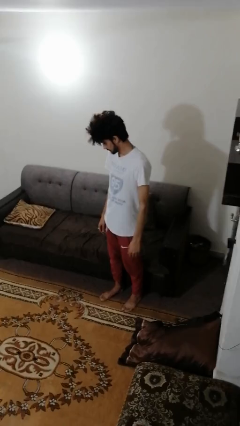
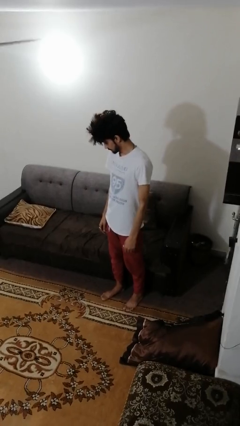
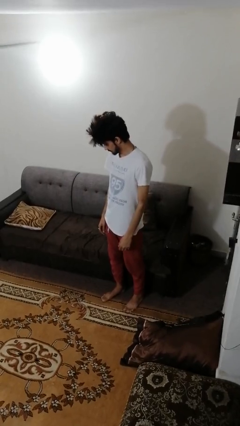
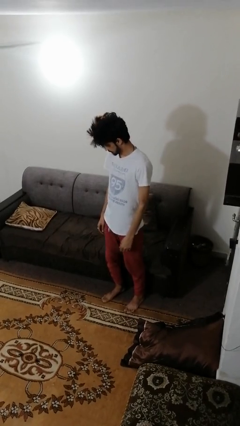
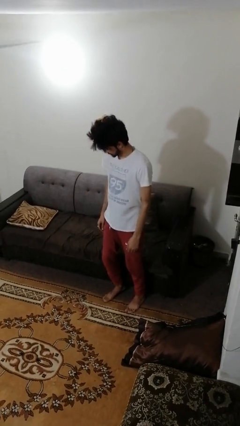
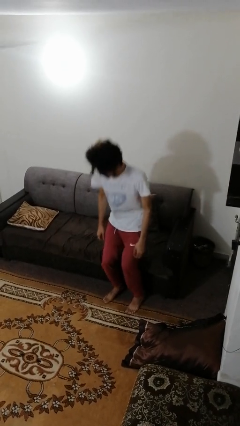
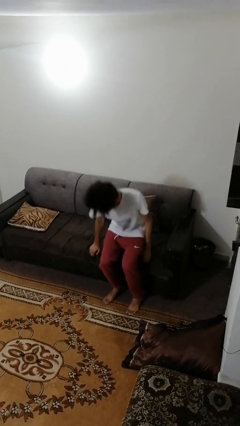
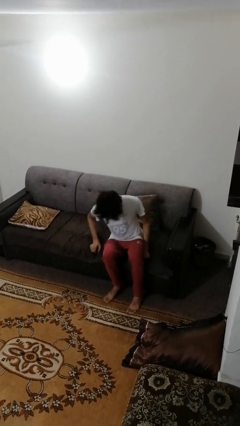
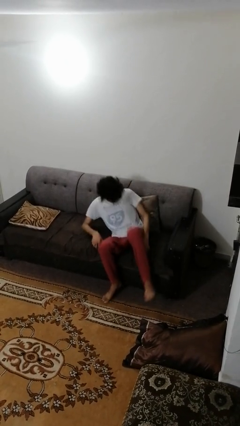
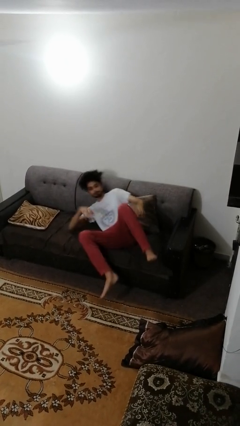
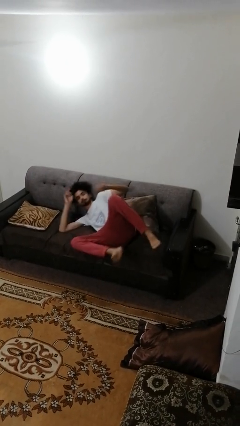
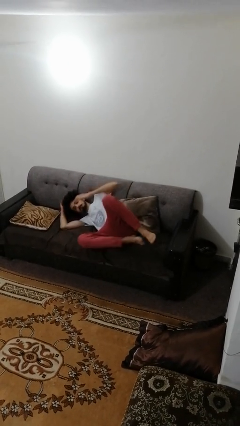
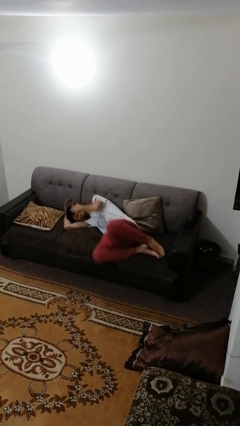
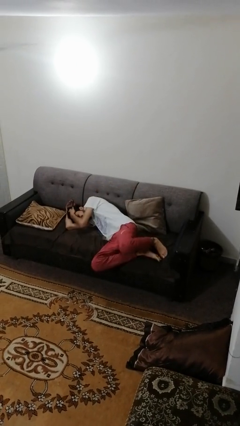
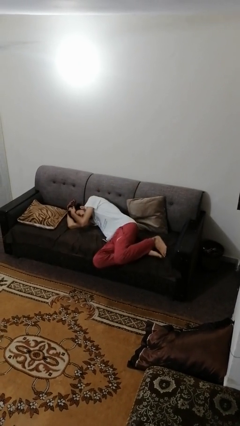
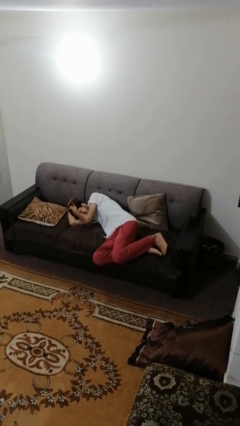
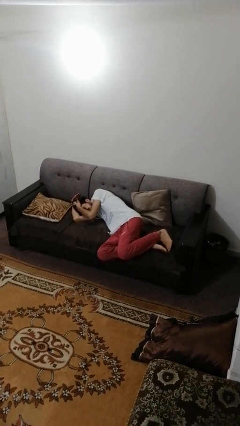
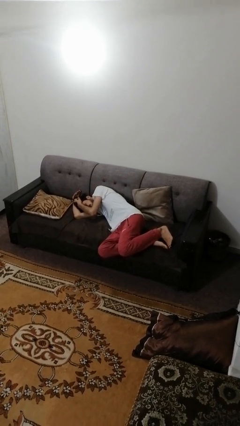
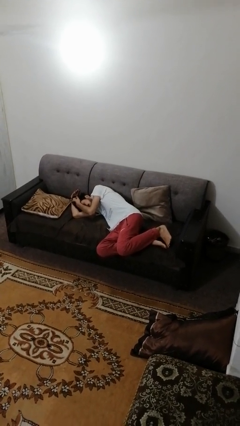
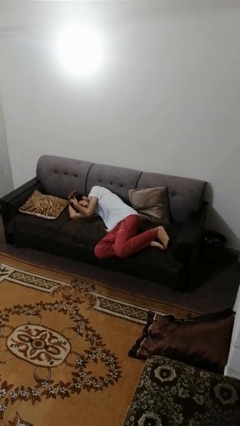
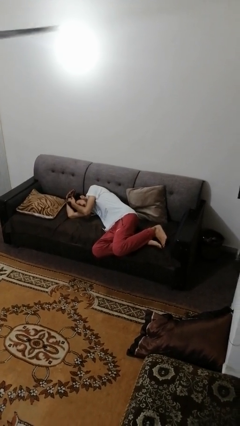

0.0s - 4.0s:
person lies down on couch

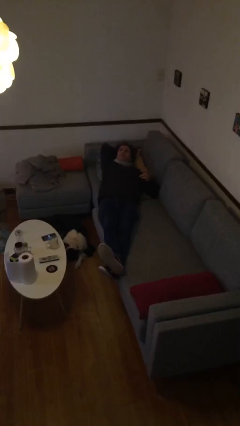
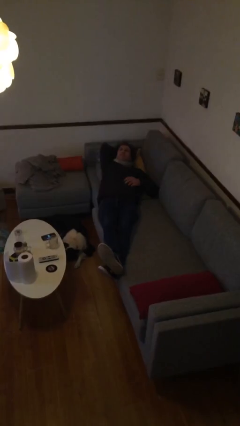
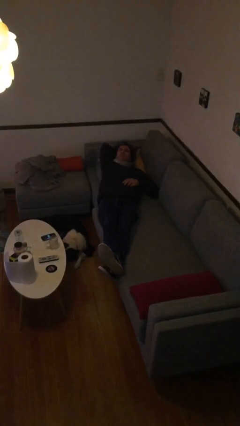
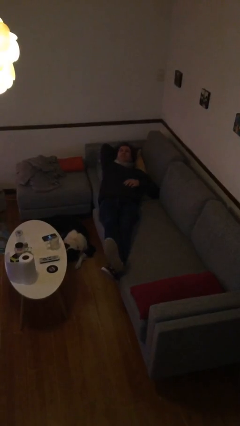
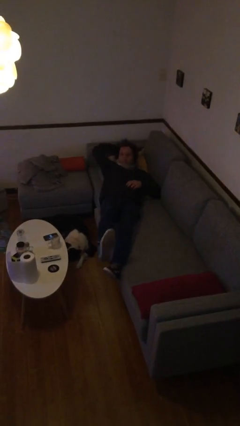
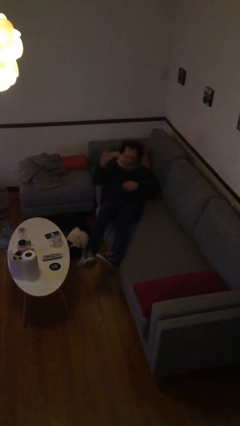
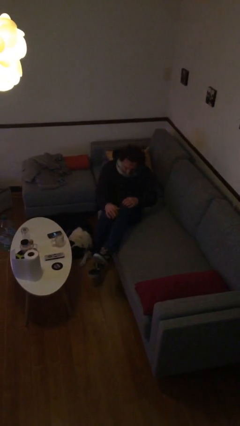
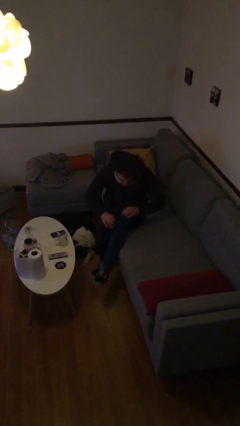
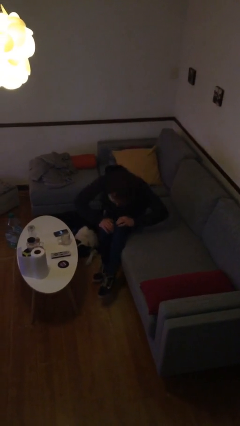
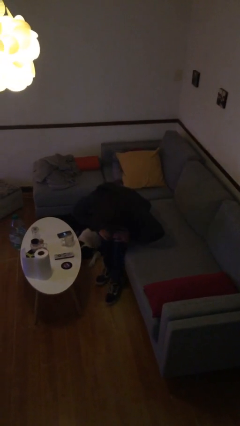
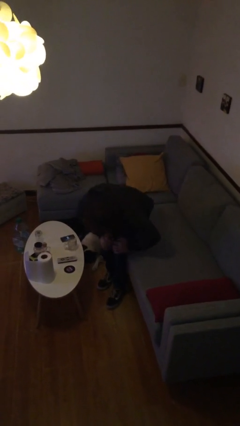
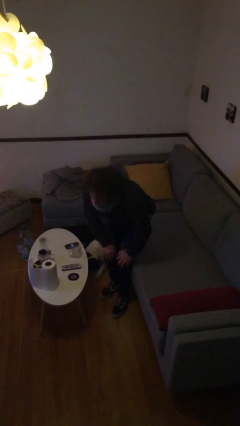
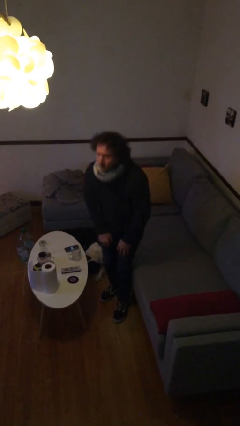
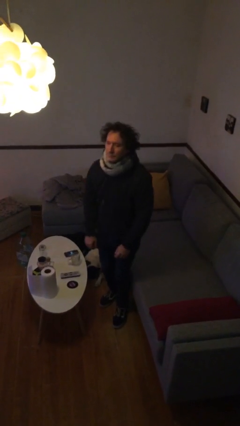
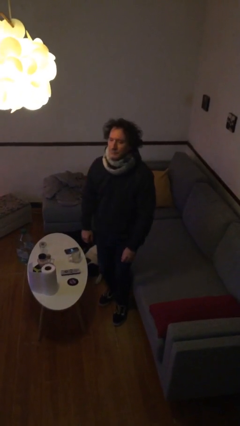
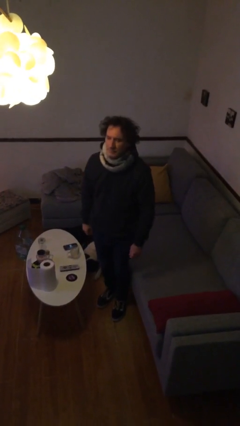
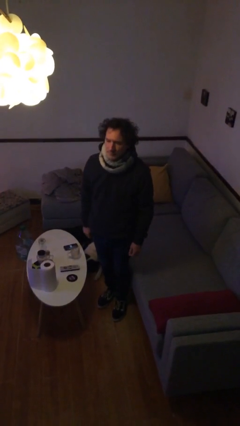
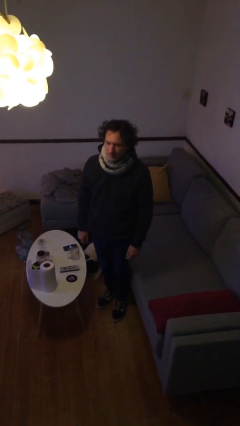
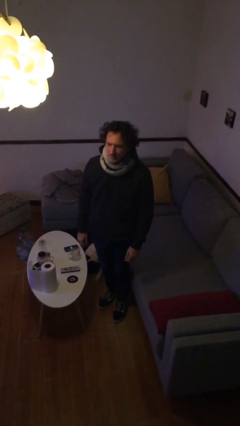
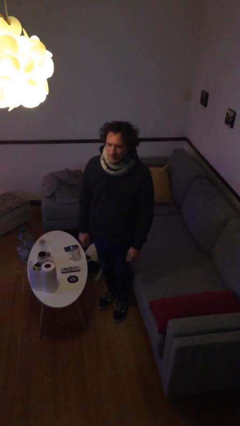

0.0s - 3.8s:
person stands up

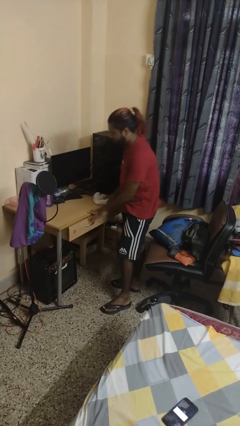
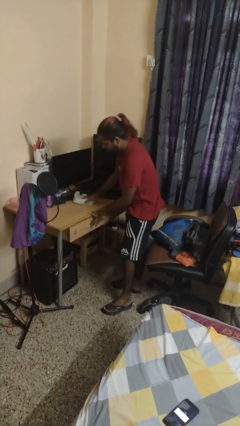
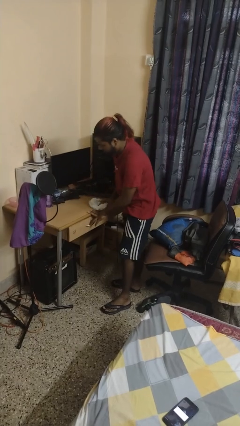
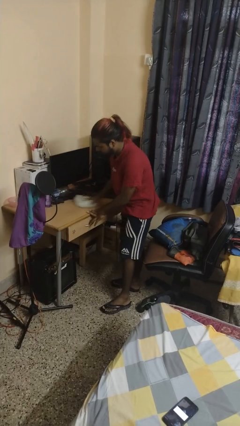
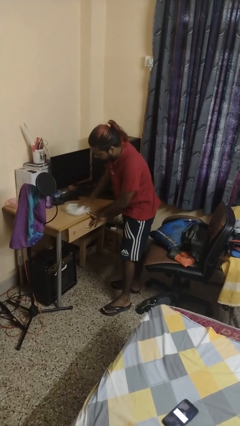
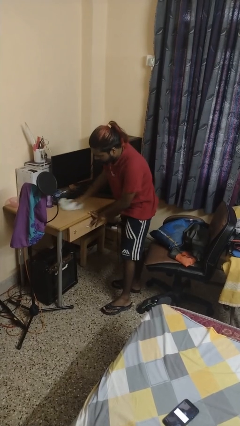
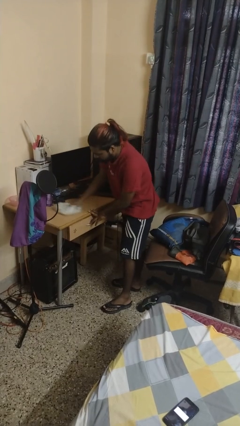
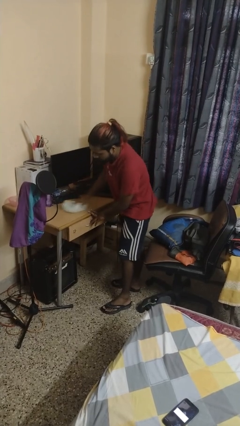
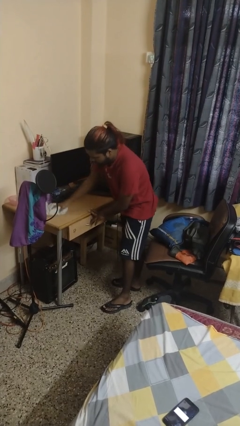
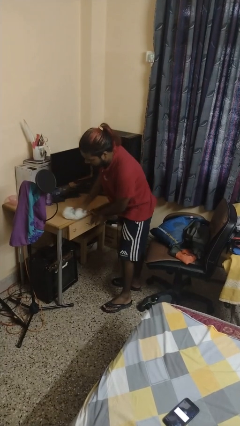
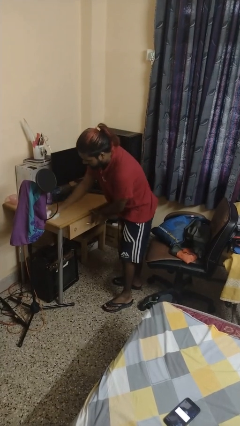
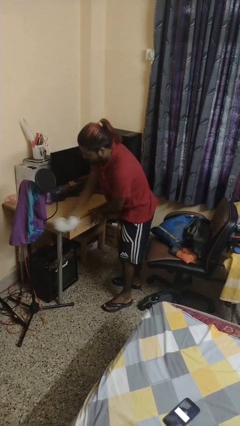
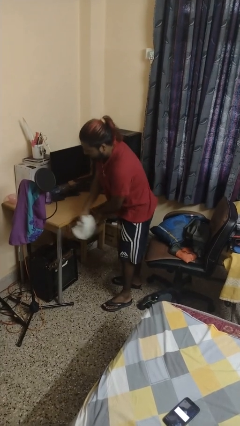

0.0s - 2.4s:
person cleans table with rag

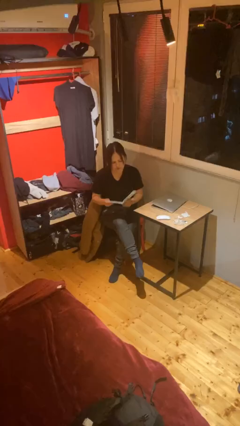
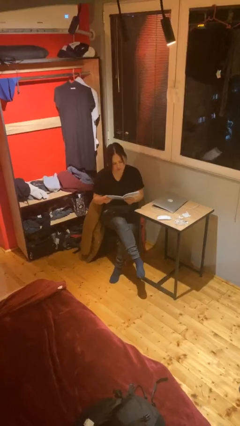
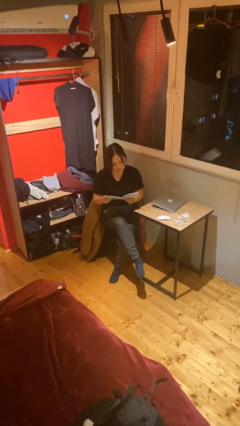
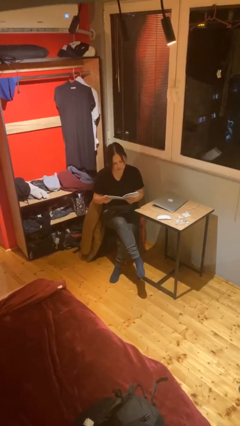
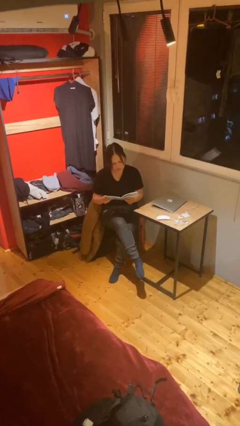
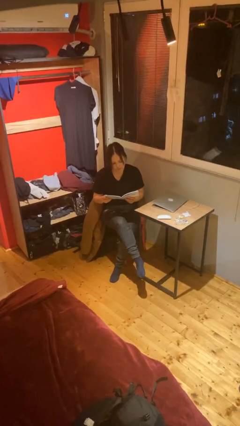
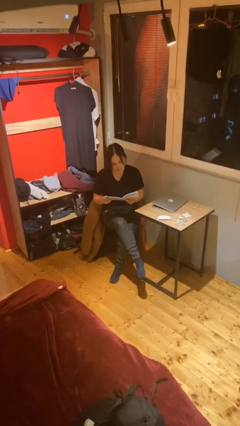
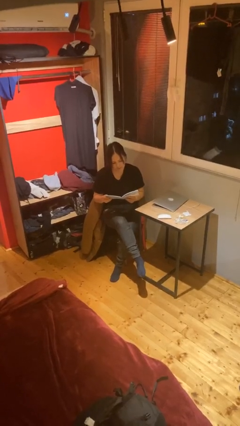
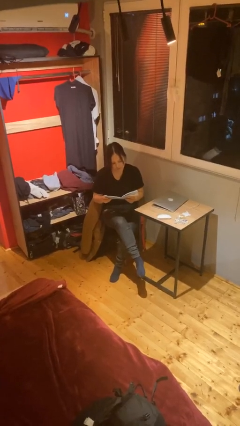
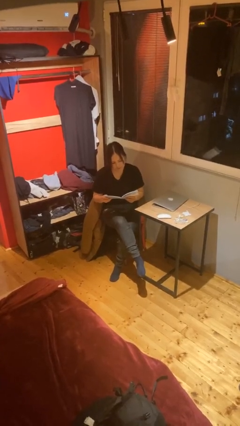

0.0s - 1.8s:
person reads document

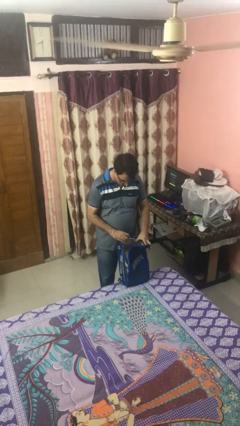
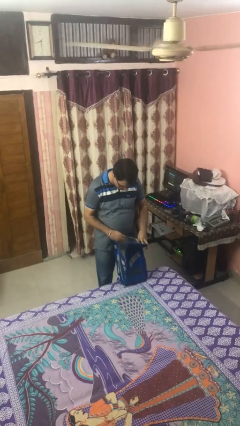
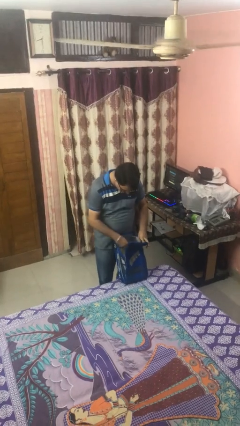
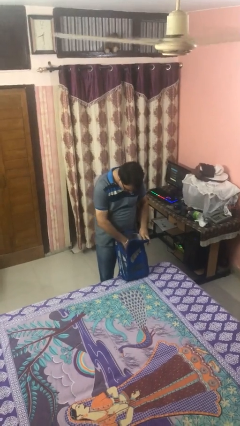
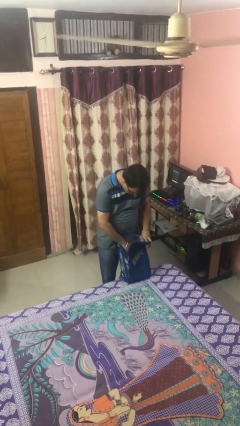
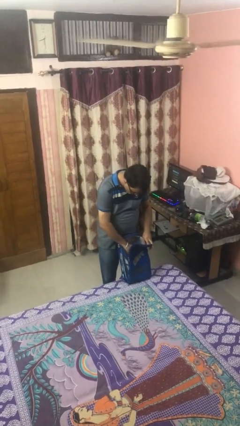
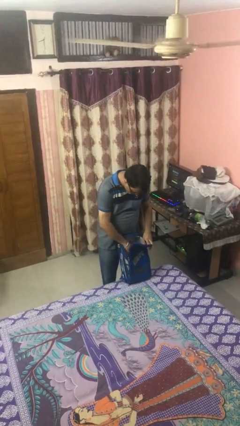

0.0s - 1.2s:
person searches in backpack

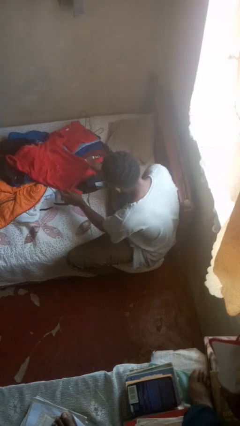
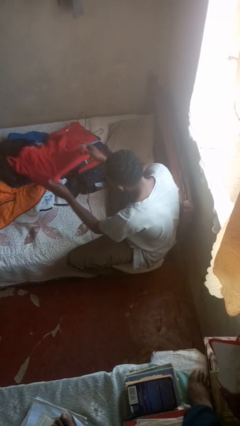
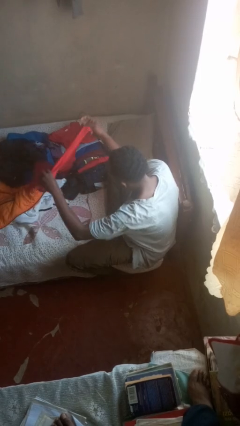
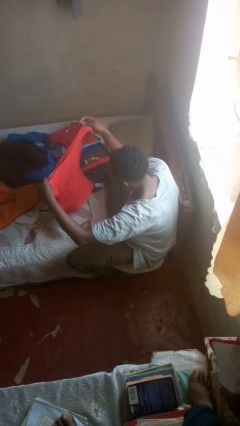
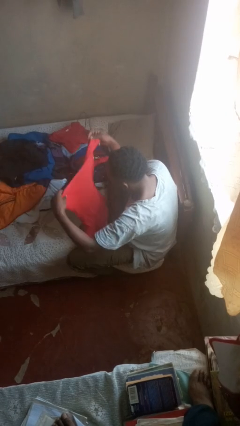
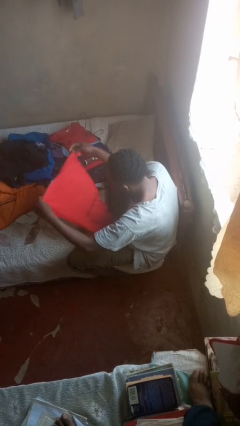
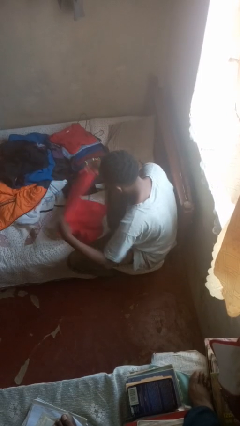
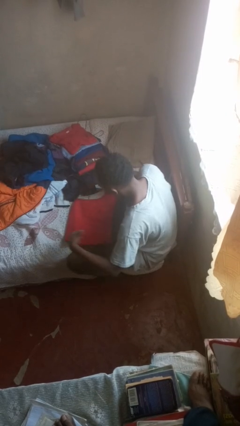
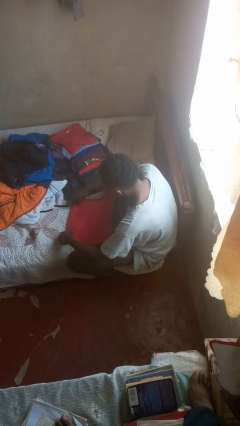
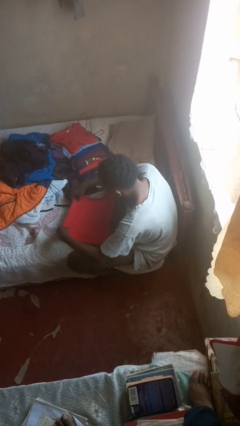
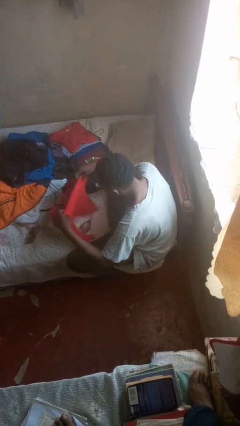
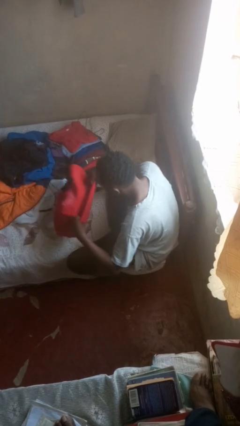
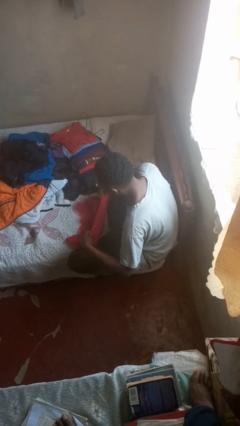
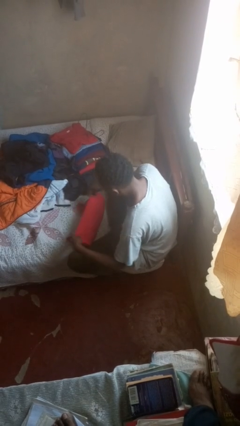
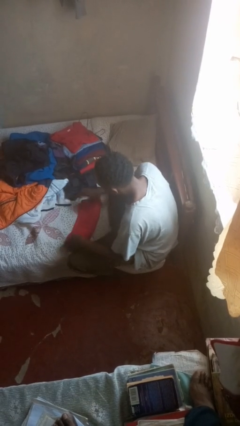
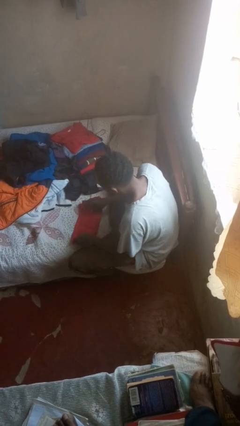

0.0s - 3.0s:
person folds shirt

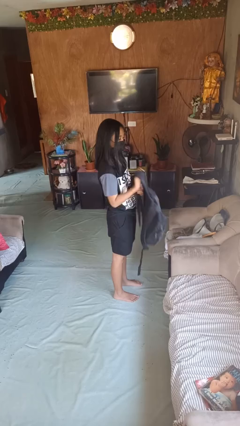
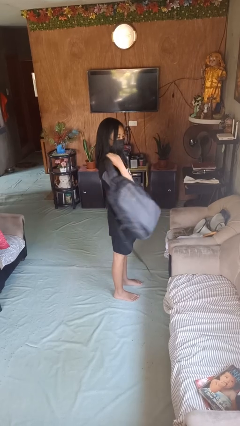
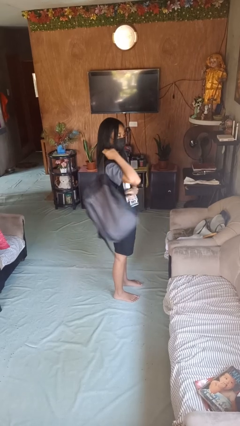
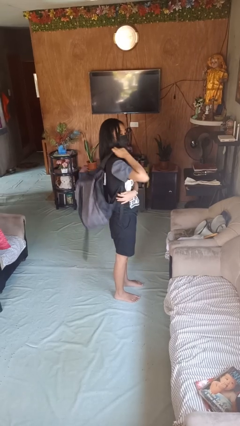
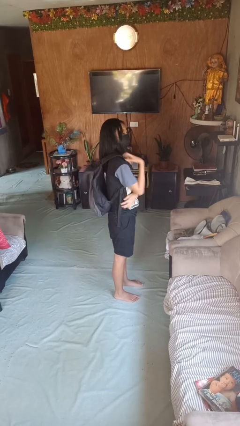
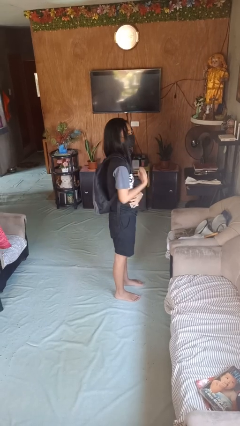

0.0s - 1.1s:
person puts on backpack

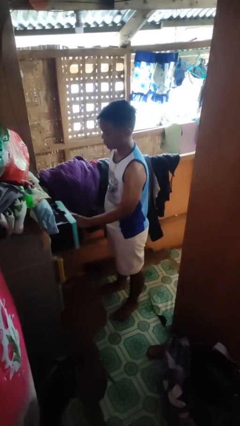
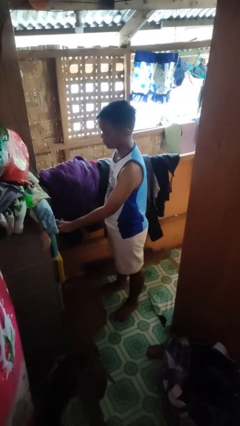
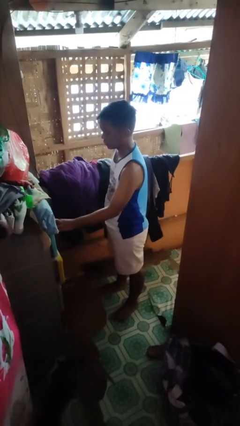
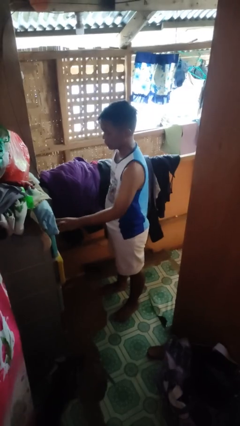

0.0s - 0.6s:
person closes dresser drawer
